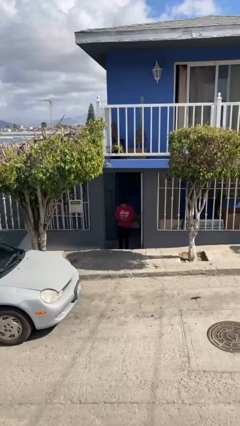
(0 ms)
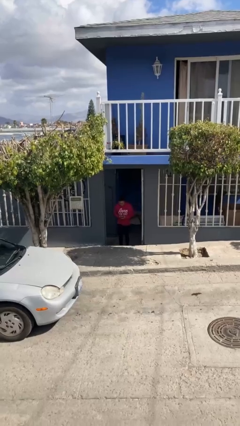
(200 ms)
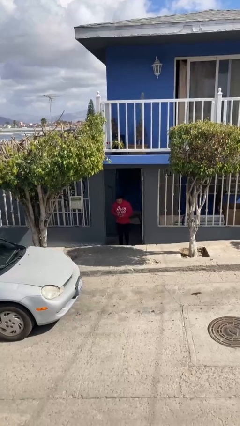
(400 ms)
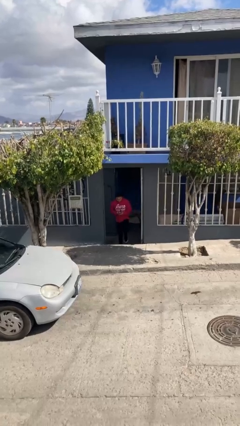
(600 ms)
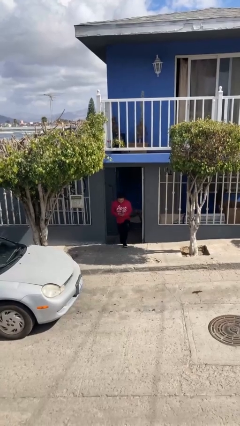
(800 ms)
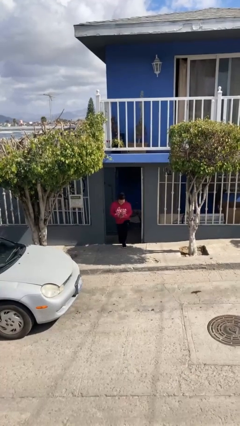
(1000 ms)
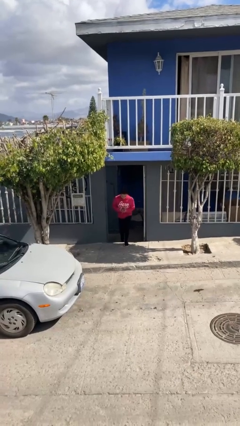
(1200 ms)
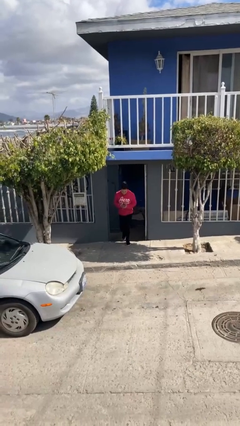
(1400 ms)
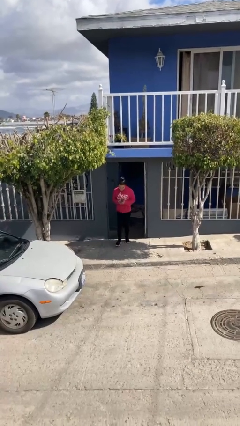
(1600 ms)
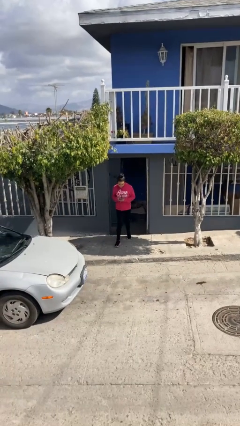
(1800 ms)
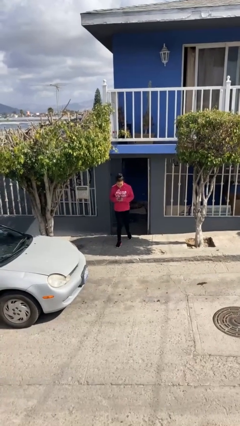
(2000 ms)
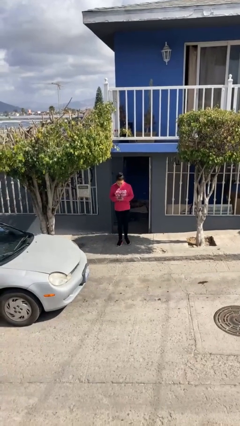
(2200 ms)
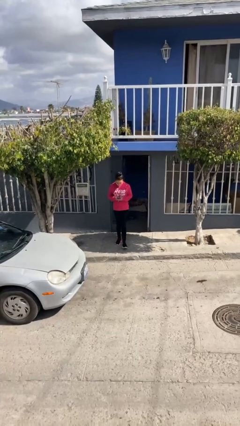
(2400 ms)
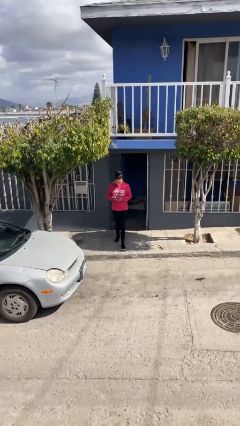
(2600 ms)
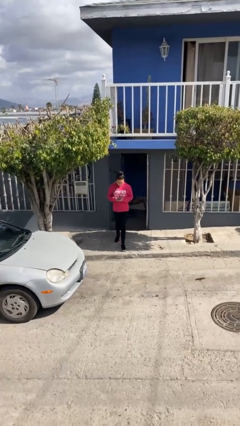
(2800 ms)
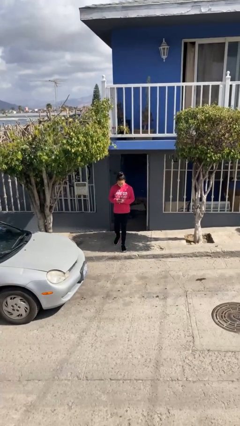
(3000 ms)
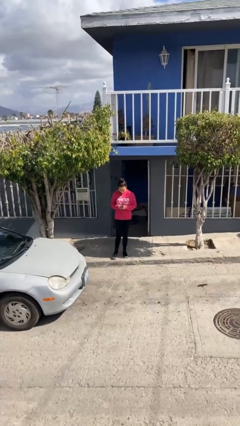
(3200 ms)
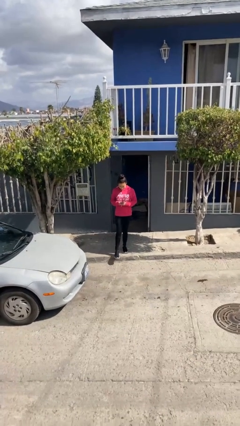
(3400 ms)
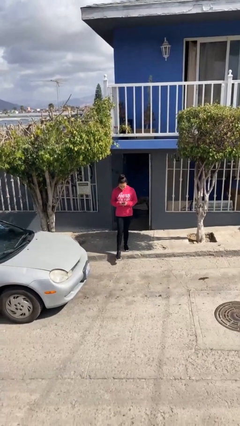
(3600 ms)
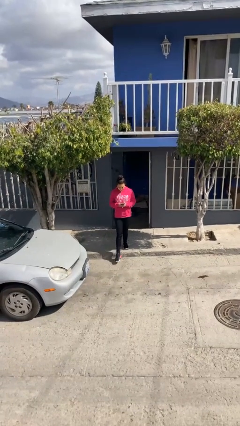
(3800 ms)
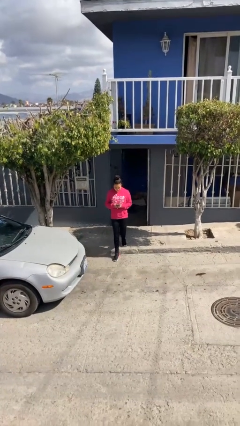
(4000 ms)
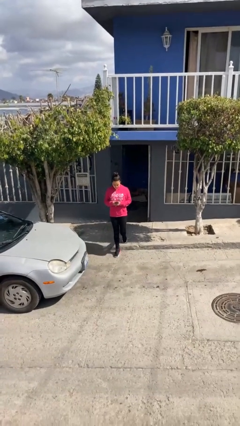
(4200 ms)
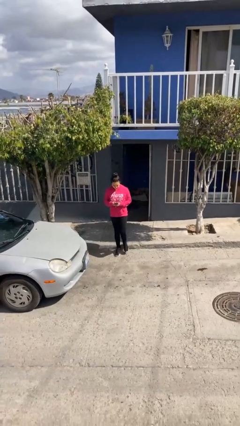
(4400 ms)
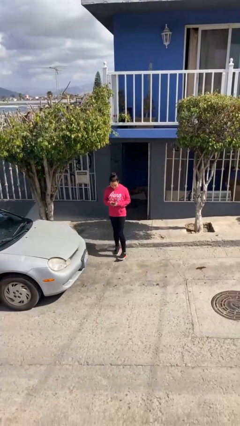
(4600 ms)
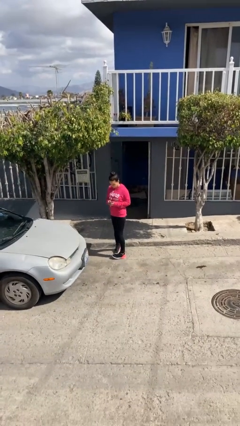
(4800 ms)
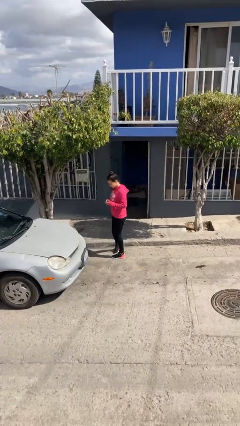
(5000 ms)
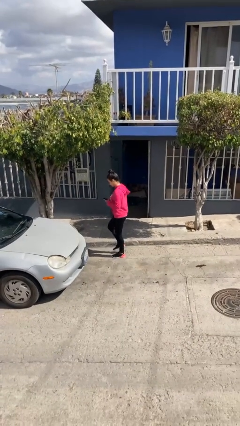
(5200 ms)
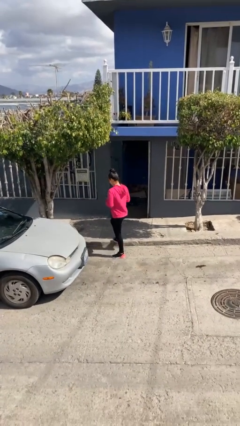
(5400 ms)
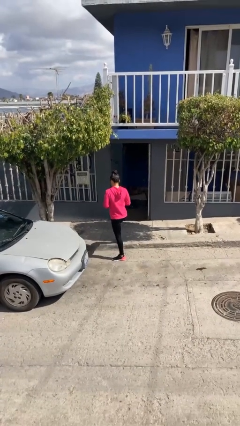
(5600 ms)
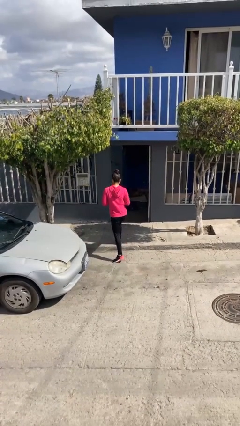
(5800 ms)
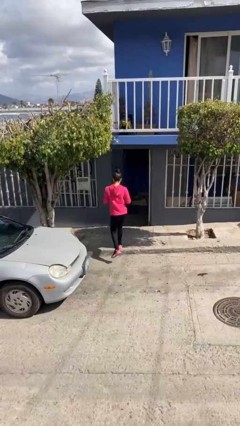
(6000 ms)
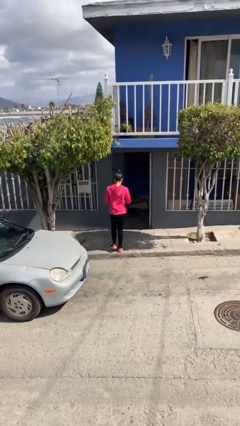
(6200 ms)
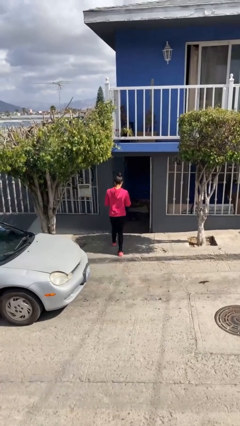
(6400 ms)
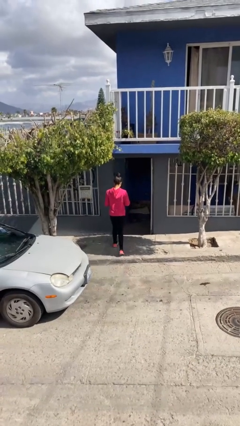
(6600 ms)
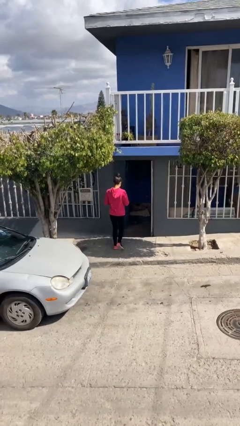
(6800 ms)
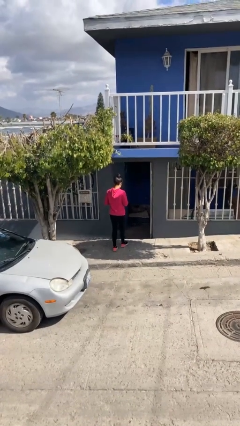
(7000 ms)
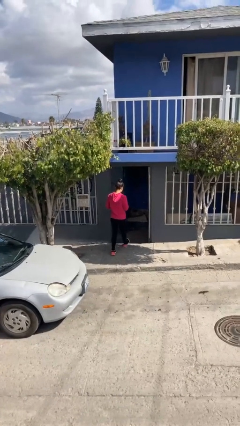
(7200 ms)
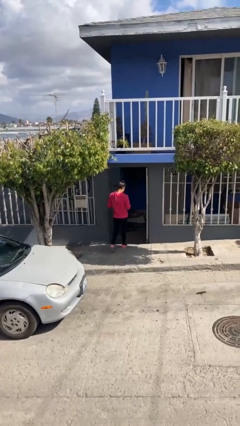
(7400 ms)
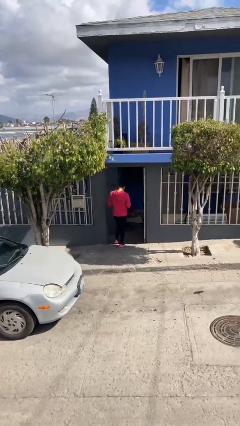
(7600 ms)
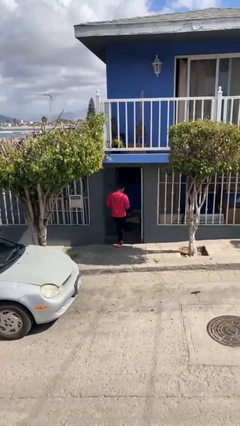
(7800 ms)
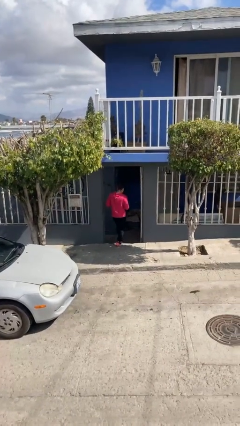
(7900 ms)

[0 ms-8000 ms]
person enters scene through structure

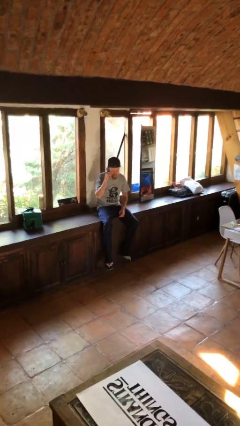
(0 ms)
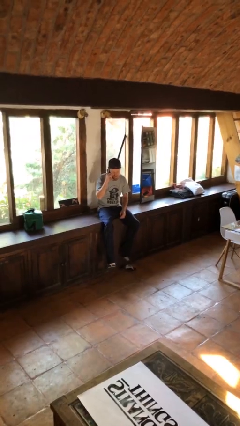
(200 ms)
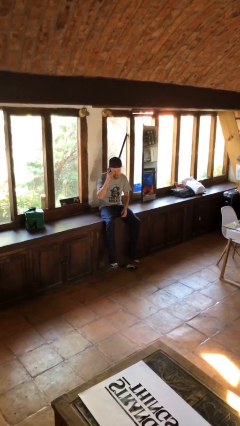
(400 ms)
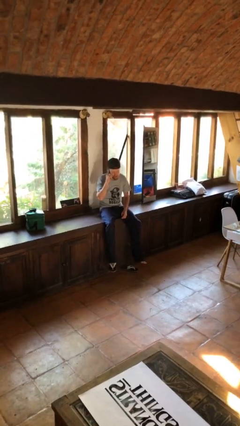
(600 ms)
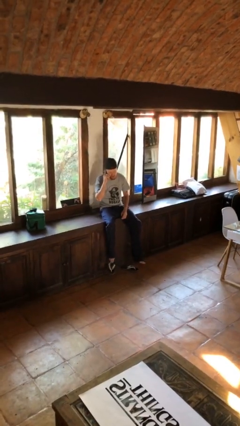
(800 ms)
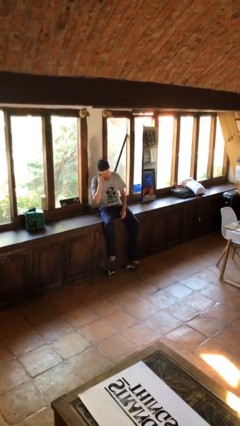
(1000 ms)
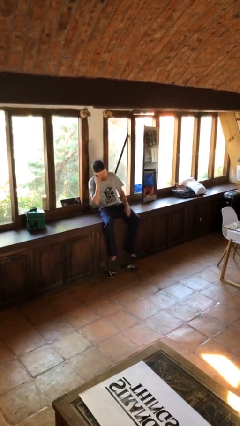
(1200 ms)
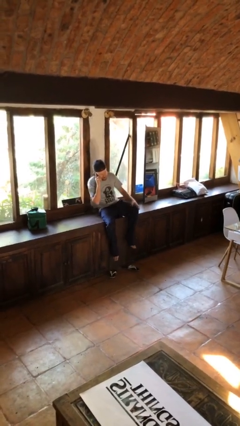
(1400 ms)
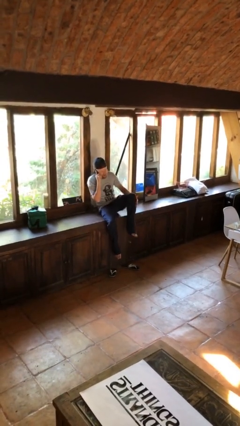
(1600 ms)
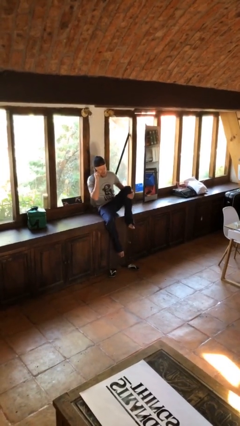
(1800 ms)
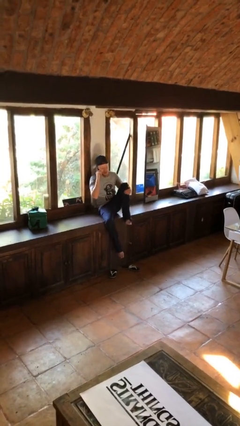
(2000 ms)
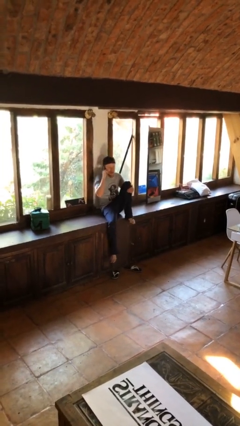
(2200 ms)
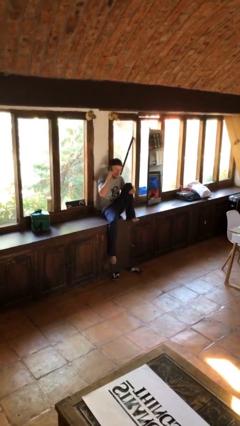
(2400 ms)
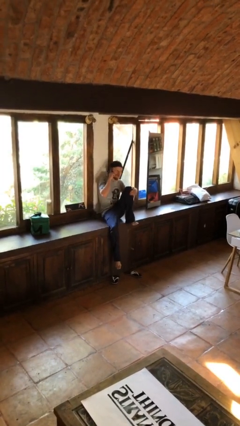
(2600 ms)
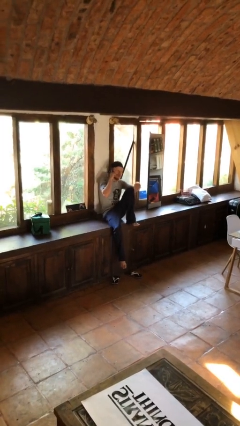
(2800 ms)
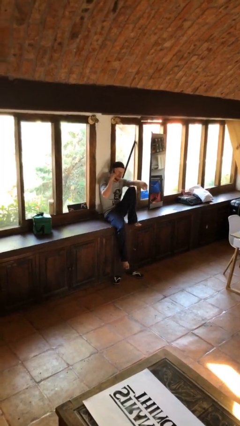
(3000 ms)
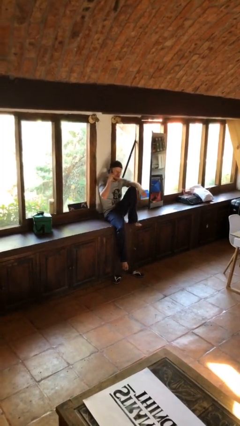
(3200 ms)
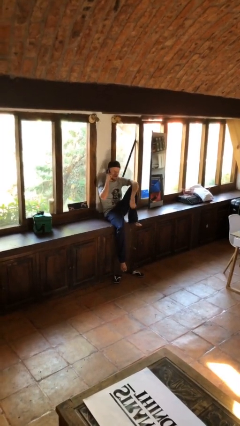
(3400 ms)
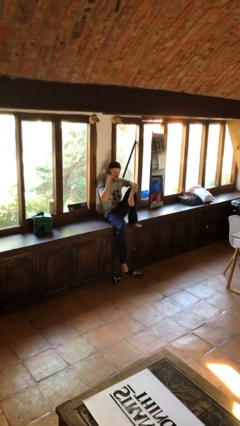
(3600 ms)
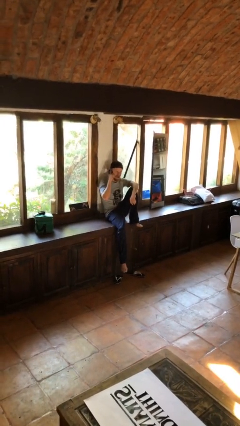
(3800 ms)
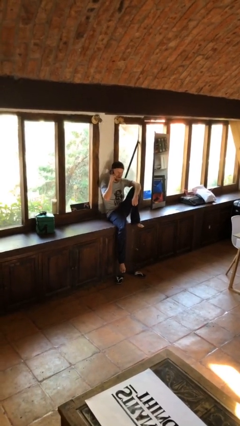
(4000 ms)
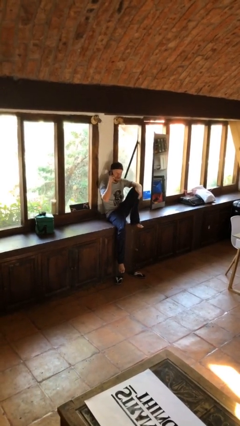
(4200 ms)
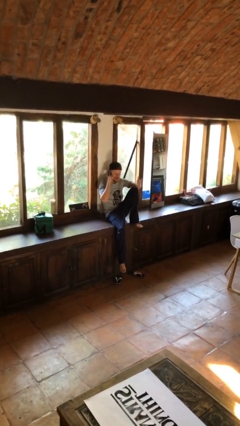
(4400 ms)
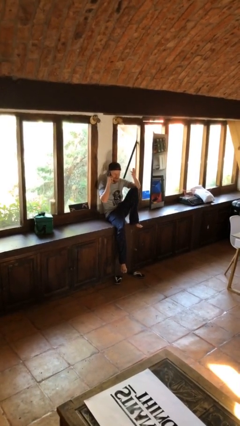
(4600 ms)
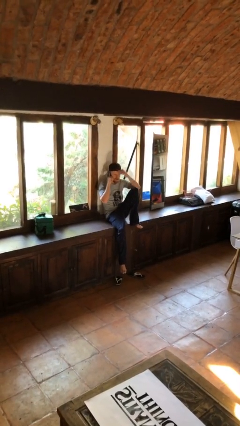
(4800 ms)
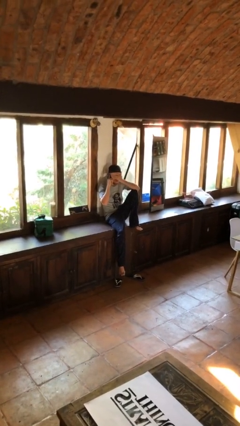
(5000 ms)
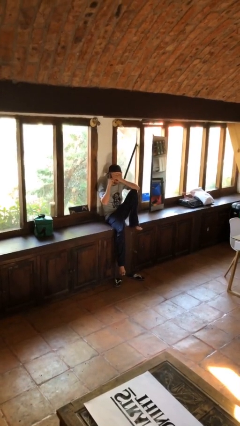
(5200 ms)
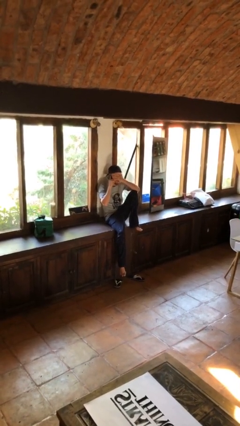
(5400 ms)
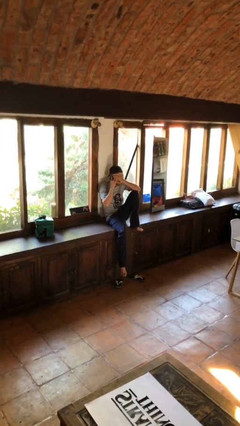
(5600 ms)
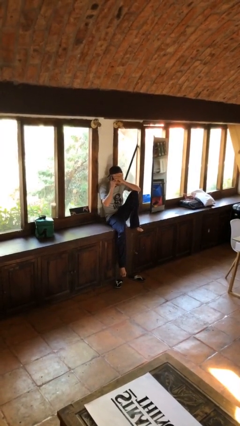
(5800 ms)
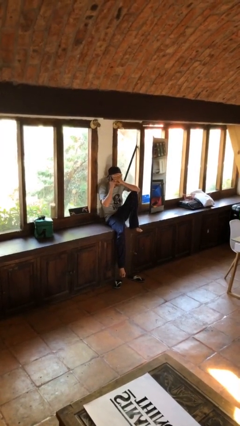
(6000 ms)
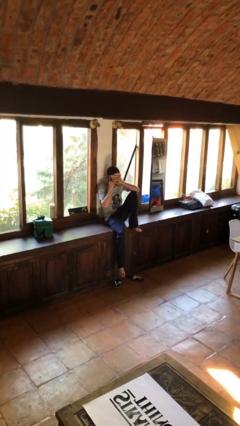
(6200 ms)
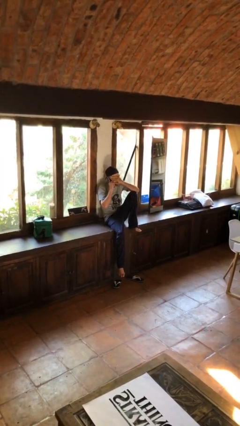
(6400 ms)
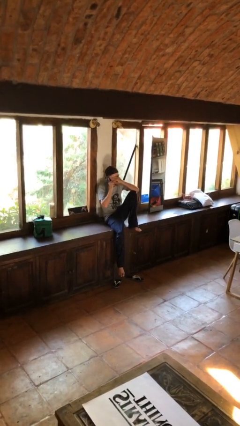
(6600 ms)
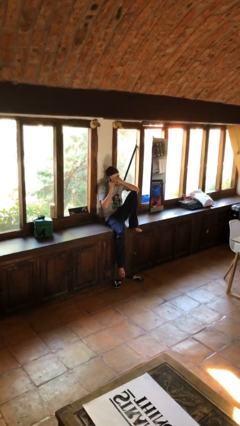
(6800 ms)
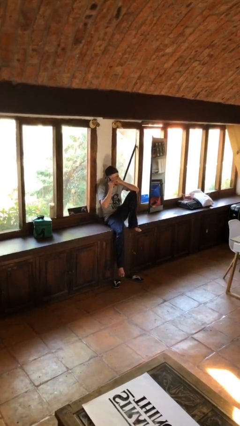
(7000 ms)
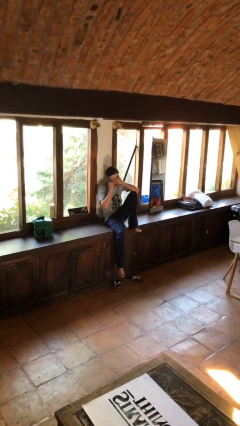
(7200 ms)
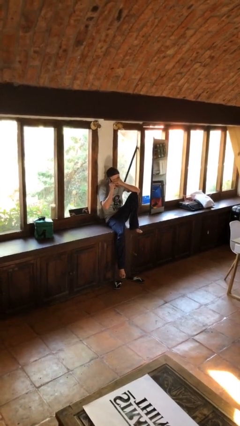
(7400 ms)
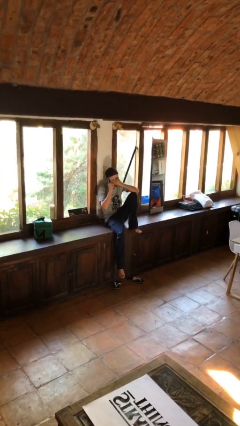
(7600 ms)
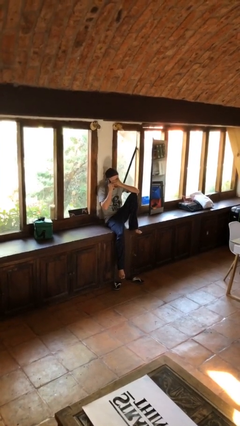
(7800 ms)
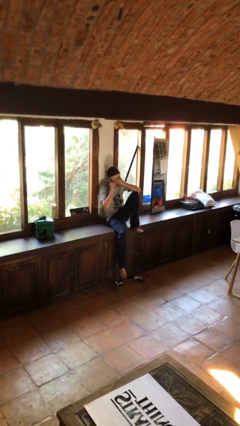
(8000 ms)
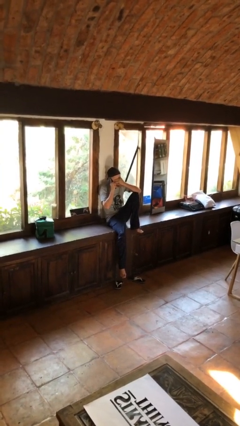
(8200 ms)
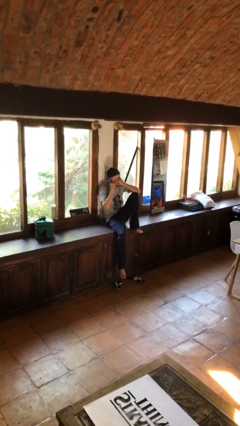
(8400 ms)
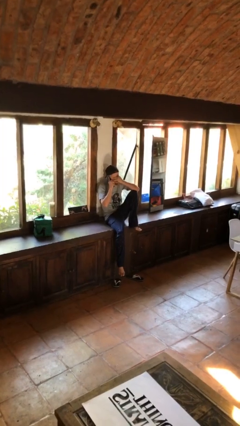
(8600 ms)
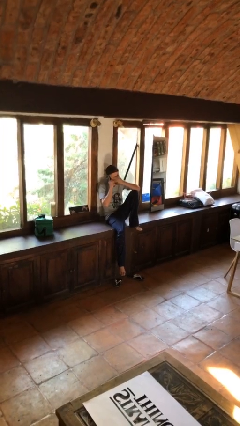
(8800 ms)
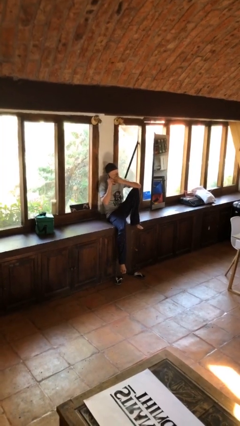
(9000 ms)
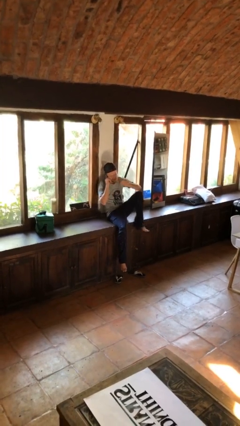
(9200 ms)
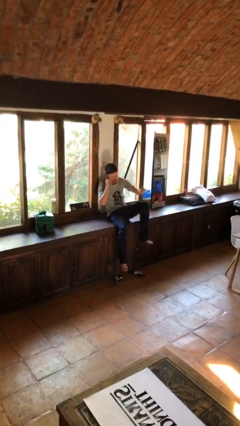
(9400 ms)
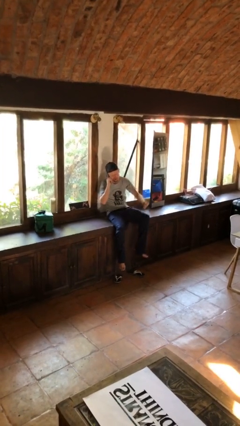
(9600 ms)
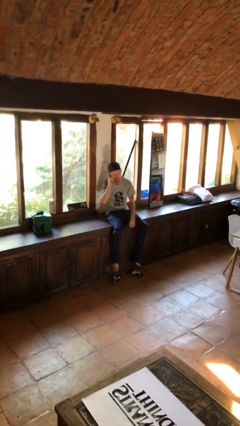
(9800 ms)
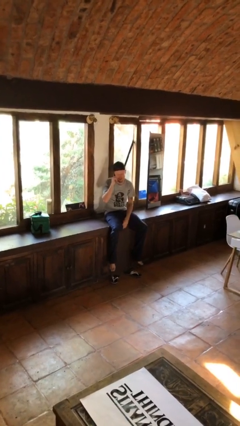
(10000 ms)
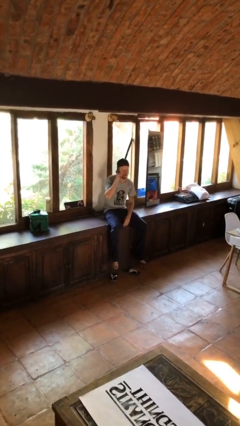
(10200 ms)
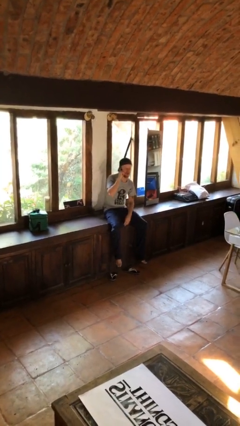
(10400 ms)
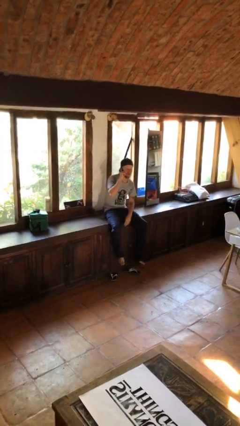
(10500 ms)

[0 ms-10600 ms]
person talks on phone
